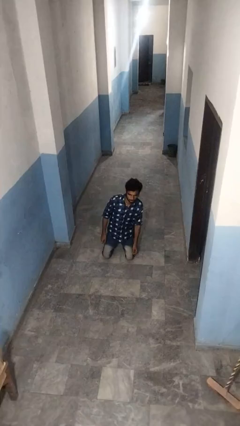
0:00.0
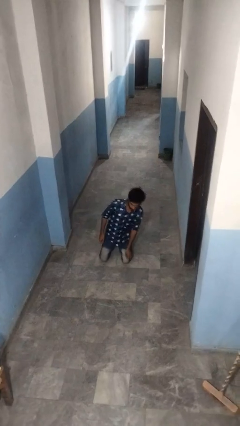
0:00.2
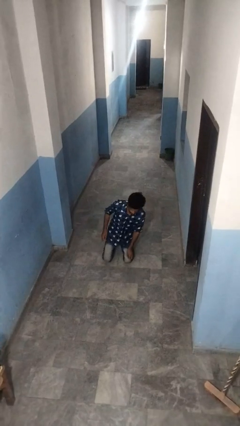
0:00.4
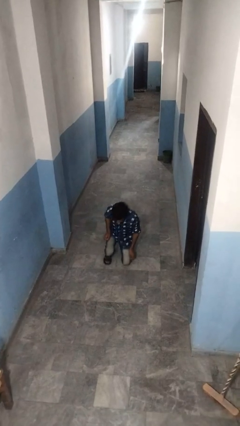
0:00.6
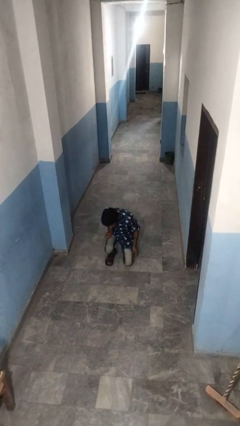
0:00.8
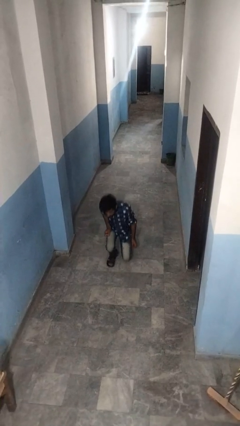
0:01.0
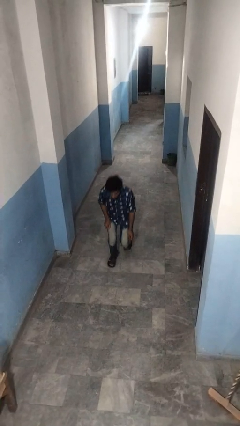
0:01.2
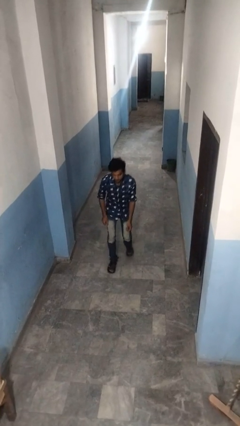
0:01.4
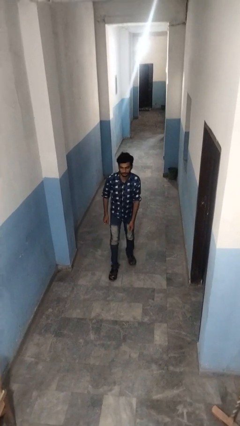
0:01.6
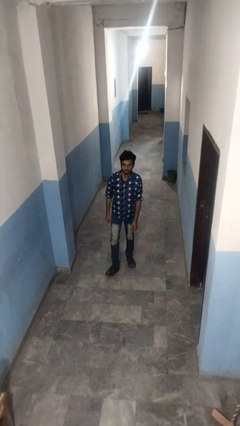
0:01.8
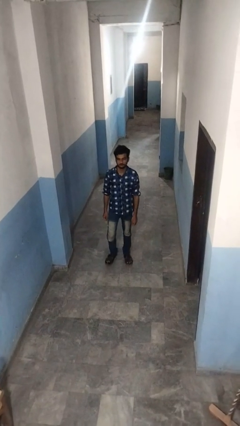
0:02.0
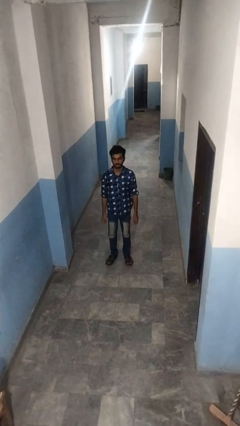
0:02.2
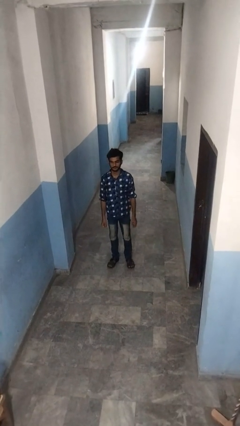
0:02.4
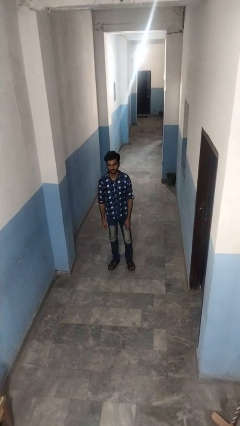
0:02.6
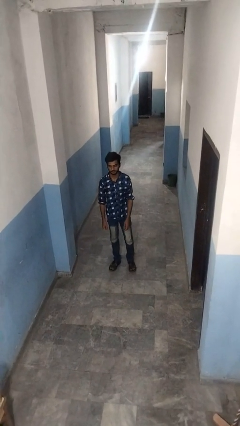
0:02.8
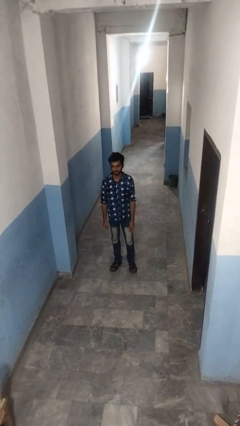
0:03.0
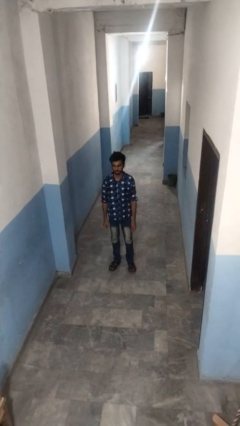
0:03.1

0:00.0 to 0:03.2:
person stands up from floor

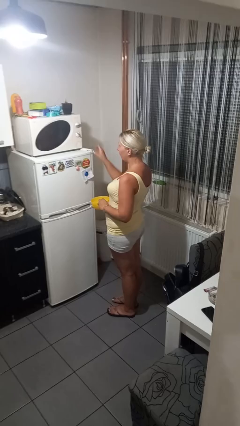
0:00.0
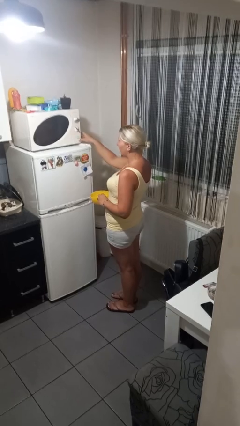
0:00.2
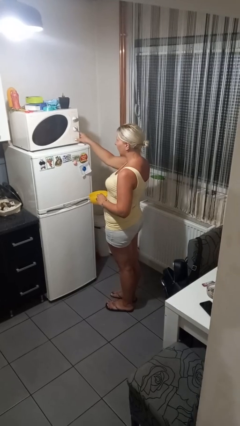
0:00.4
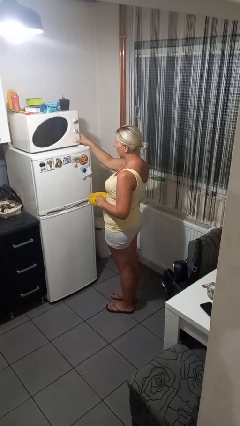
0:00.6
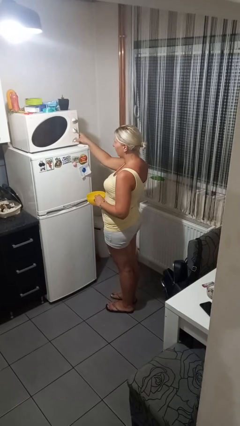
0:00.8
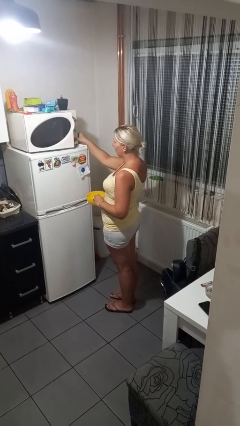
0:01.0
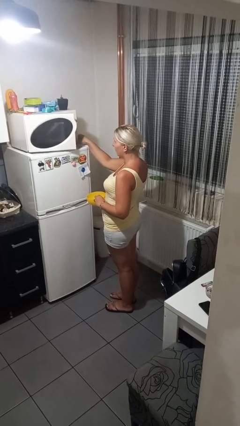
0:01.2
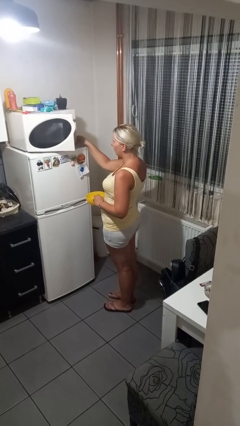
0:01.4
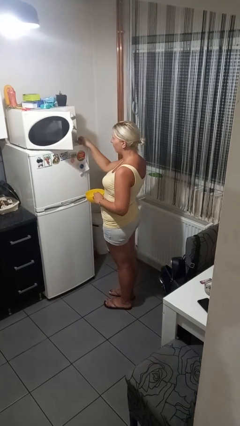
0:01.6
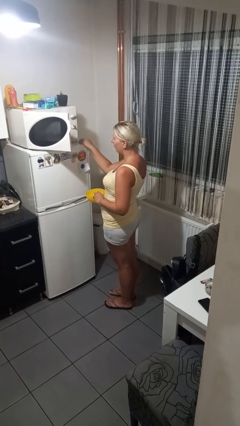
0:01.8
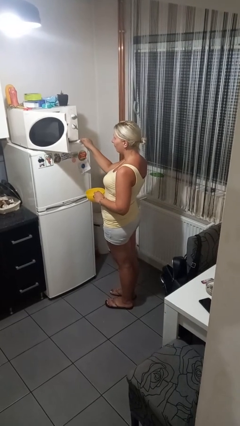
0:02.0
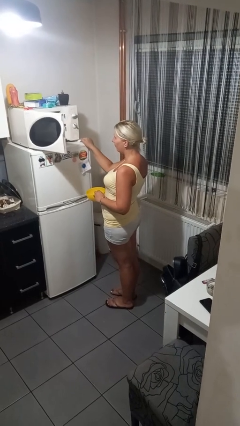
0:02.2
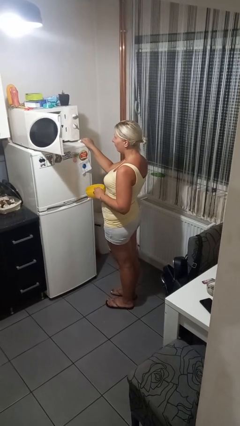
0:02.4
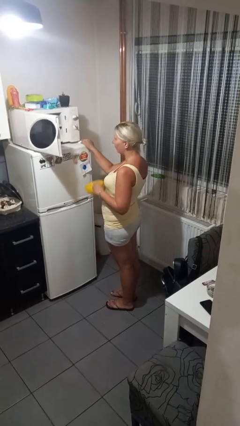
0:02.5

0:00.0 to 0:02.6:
person opens microwave

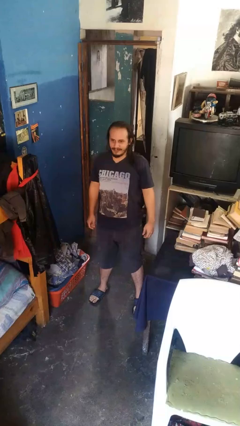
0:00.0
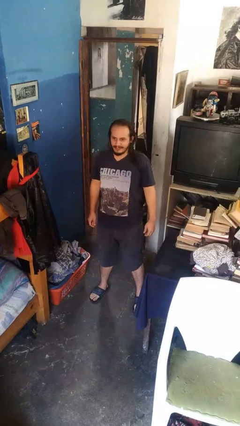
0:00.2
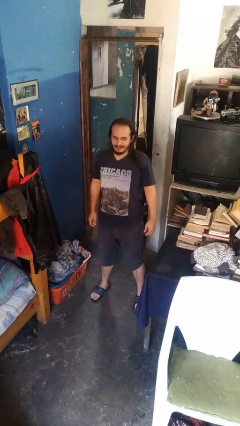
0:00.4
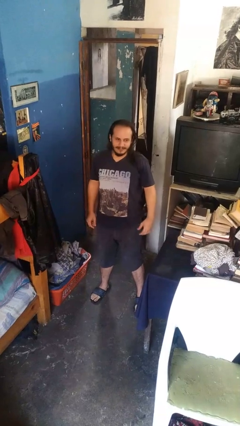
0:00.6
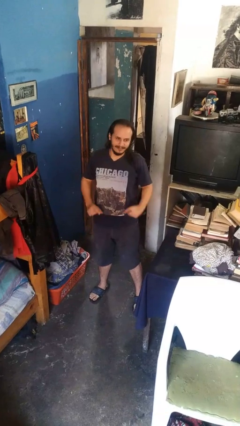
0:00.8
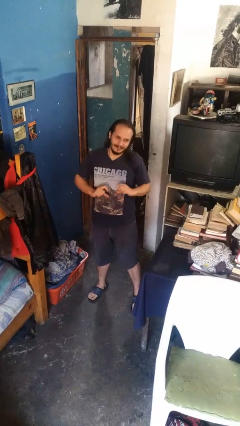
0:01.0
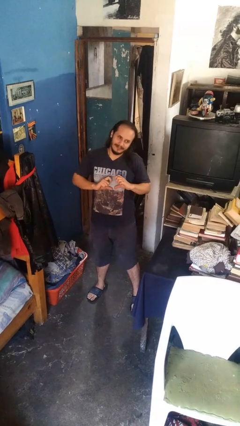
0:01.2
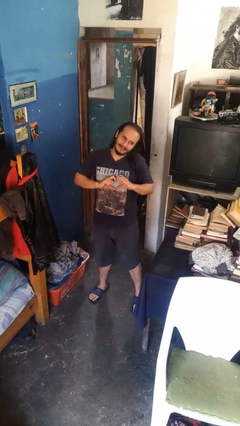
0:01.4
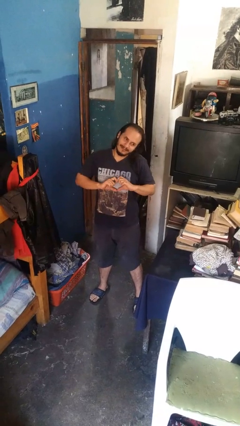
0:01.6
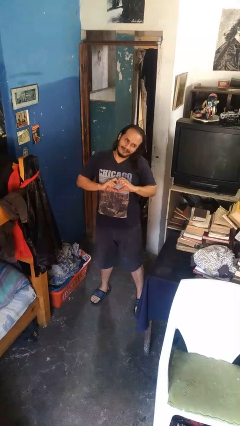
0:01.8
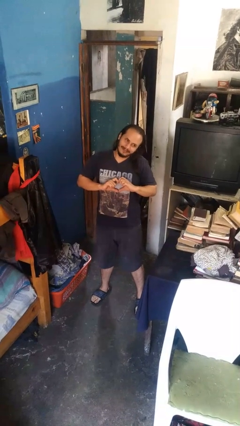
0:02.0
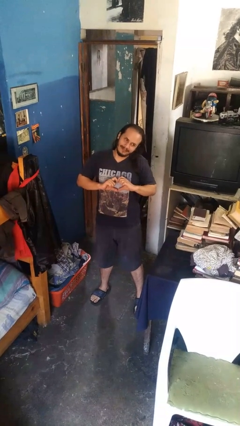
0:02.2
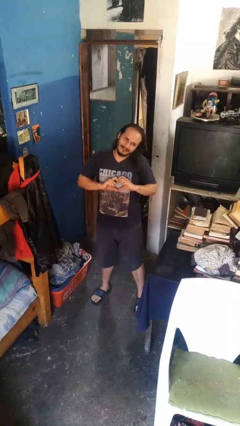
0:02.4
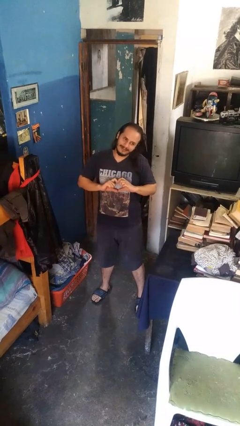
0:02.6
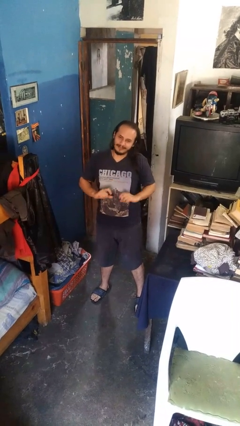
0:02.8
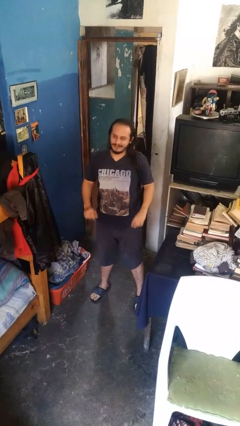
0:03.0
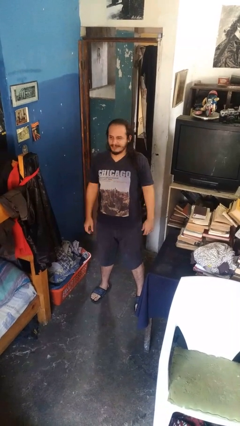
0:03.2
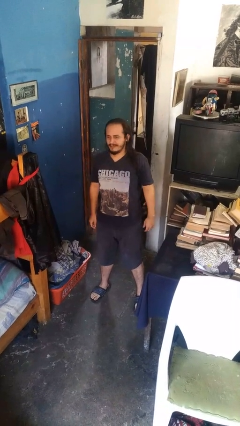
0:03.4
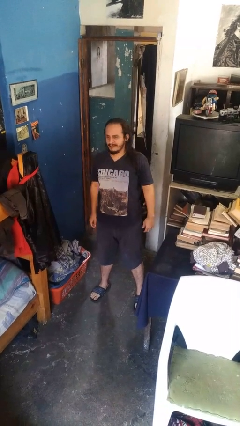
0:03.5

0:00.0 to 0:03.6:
person gestures heart

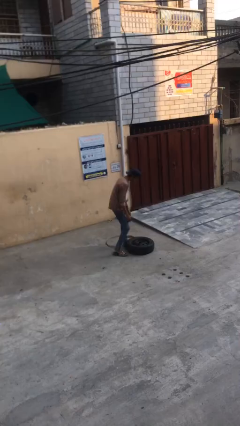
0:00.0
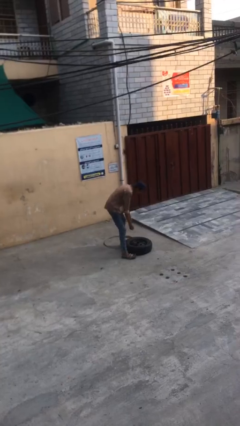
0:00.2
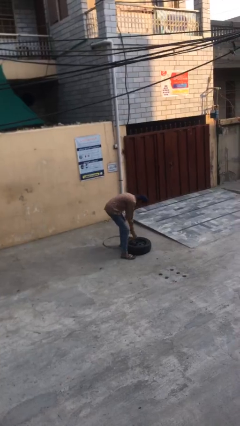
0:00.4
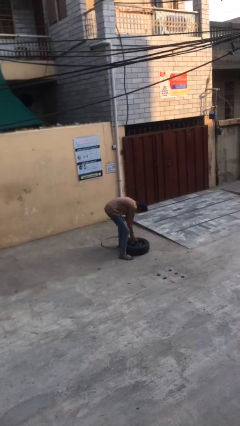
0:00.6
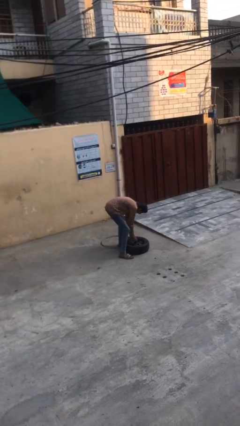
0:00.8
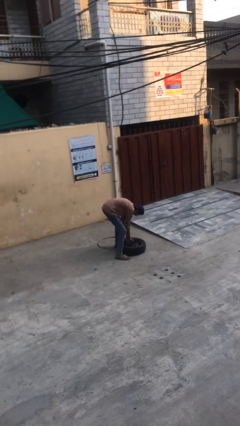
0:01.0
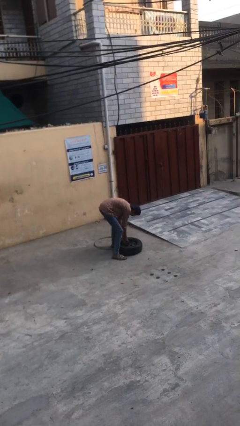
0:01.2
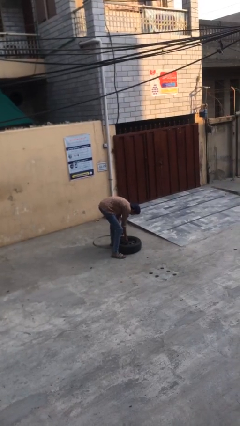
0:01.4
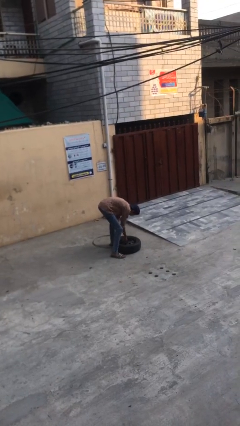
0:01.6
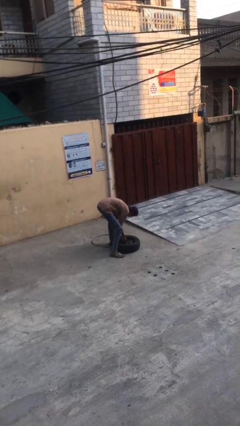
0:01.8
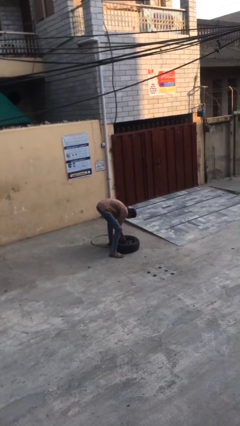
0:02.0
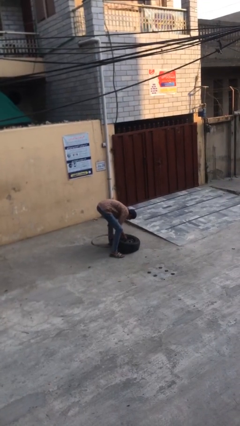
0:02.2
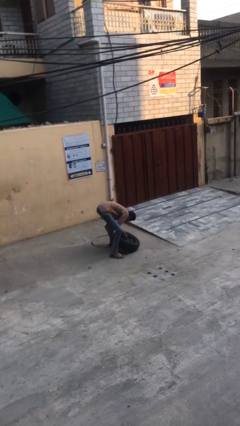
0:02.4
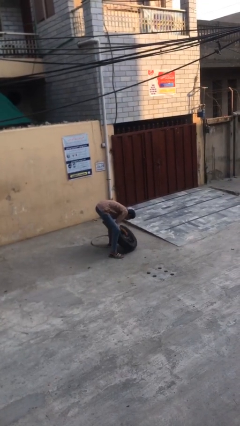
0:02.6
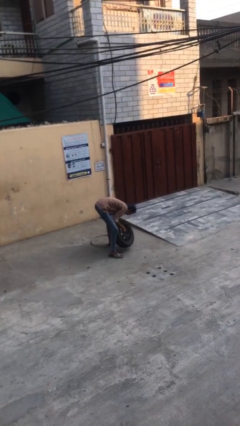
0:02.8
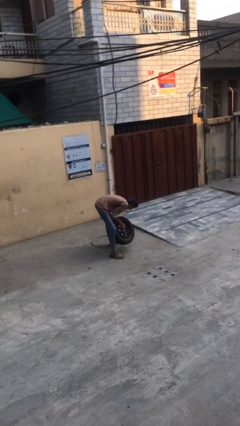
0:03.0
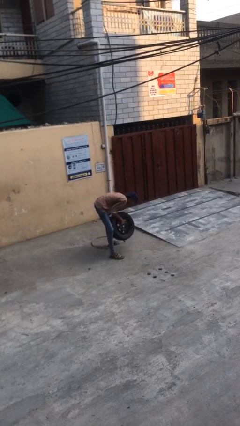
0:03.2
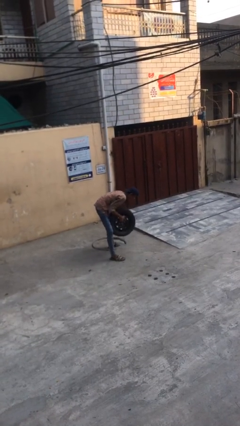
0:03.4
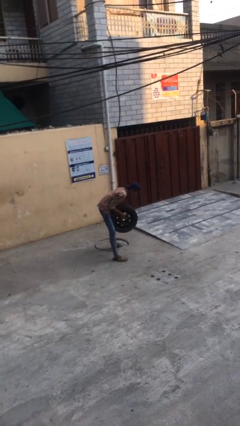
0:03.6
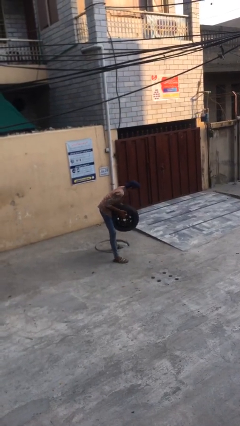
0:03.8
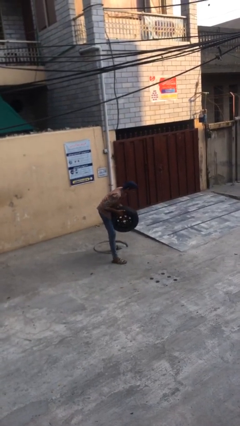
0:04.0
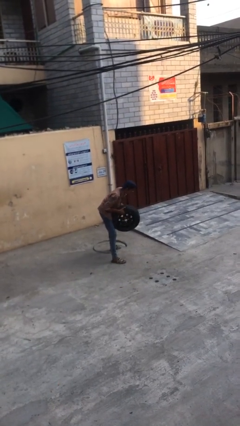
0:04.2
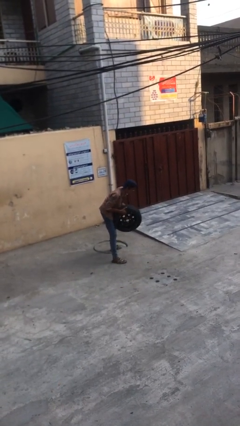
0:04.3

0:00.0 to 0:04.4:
person picks up object from floor

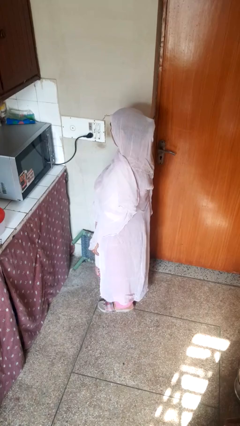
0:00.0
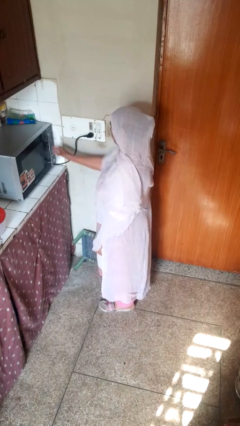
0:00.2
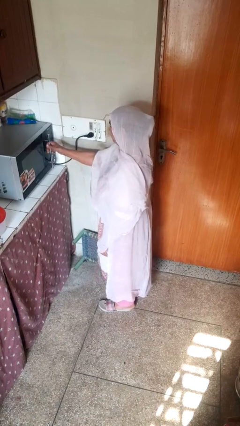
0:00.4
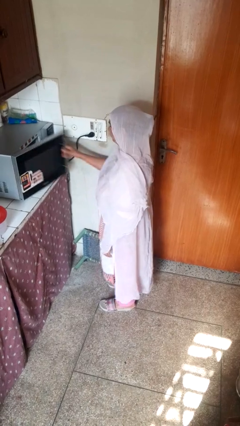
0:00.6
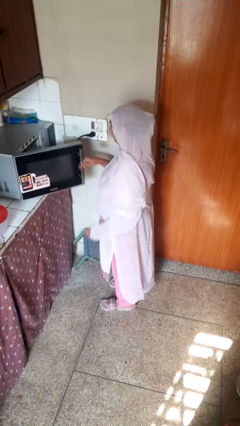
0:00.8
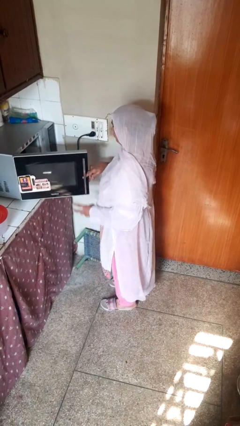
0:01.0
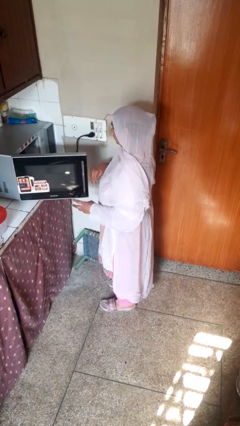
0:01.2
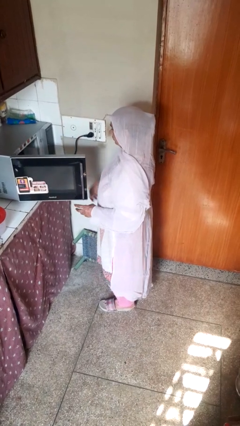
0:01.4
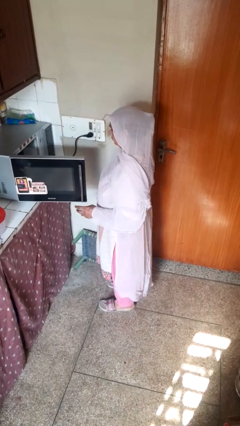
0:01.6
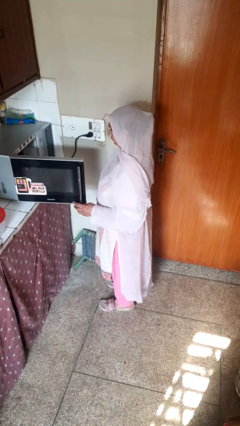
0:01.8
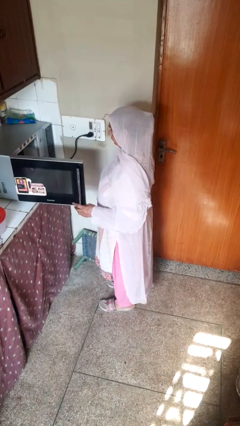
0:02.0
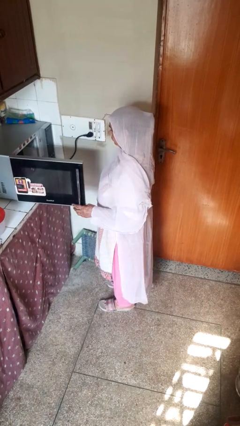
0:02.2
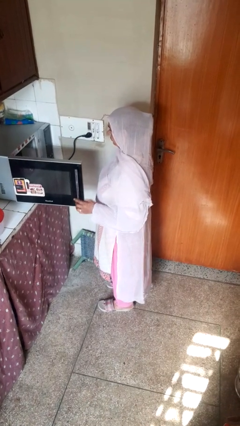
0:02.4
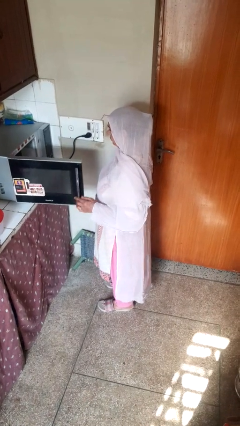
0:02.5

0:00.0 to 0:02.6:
person opens oven door

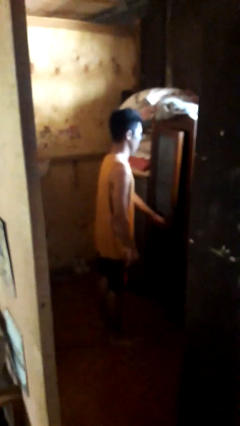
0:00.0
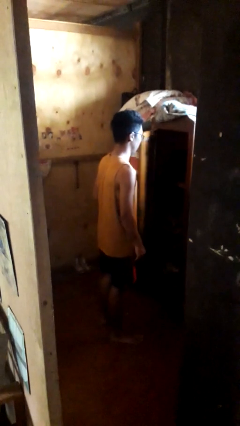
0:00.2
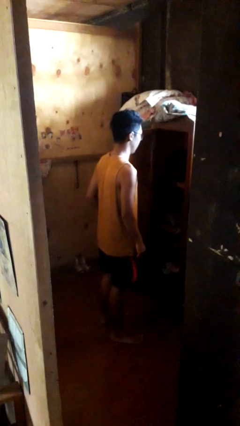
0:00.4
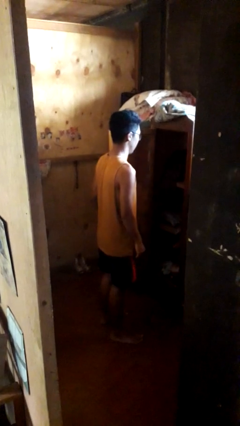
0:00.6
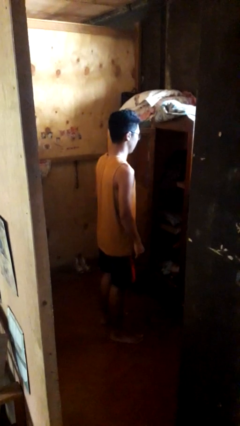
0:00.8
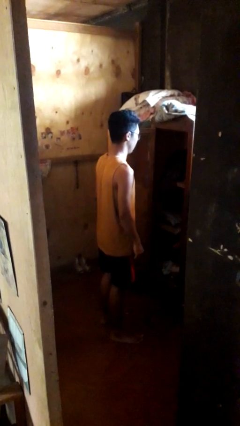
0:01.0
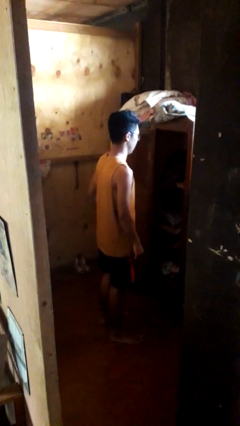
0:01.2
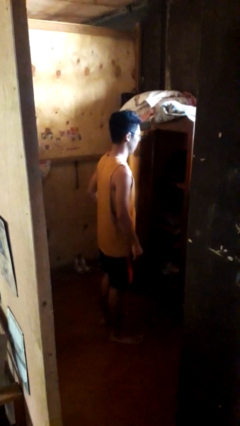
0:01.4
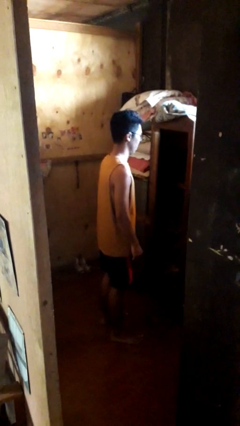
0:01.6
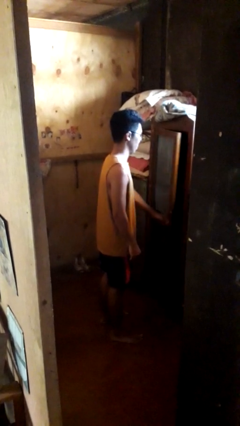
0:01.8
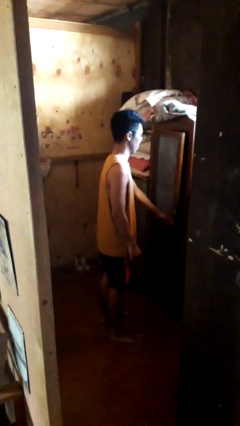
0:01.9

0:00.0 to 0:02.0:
person opens closet door
